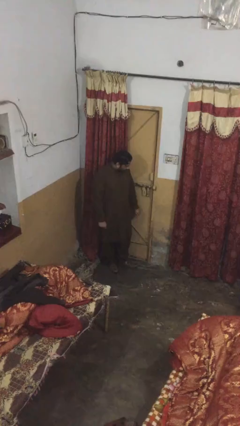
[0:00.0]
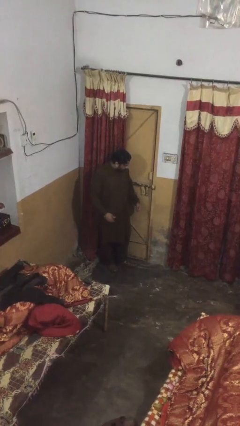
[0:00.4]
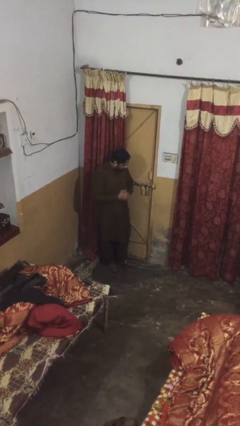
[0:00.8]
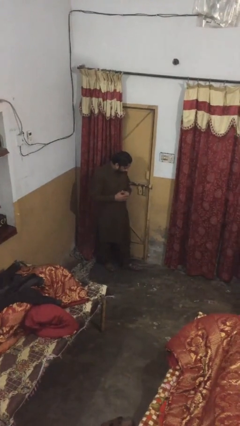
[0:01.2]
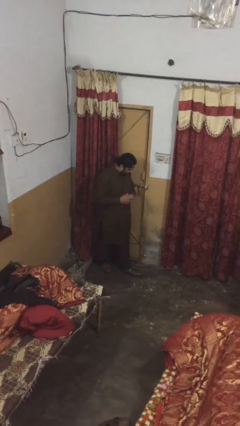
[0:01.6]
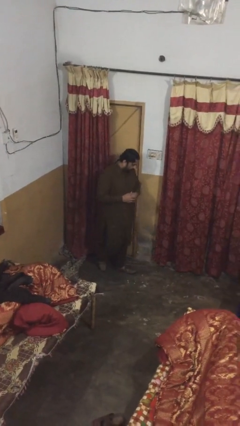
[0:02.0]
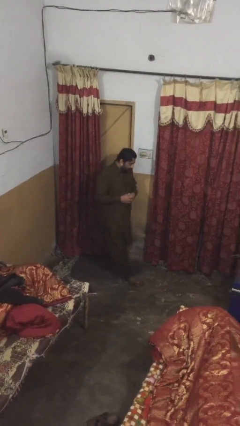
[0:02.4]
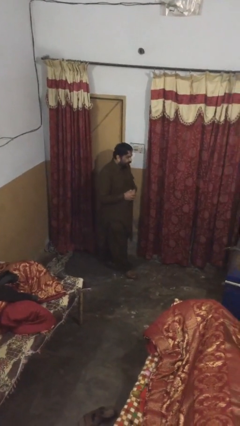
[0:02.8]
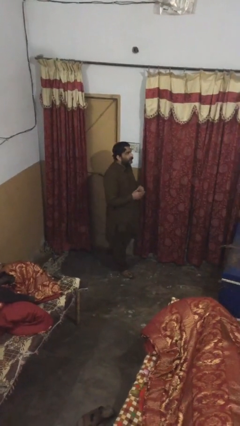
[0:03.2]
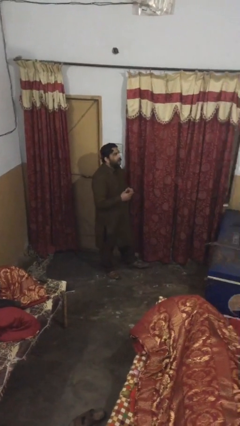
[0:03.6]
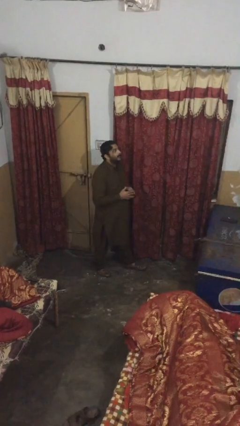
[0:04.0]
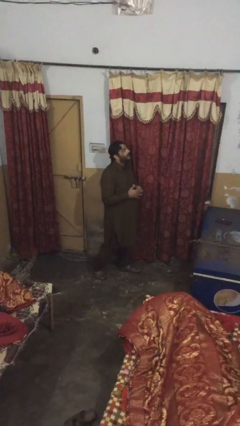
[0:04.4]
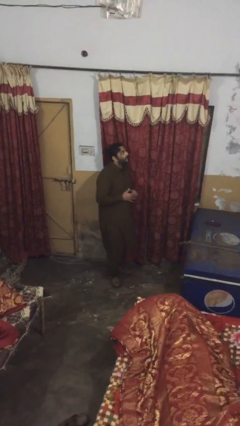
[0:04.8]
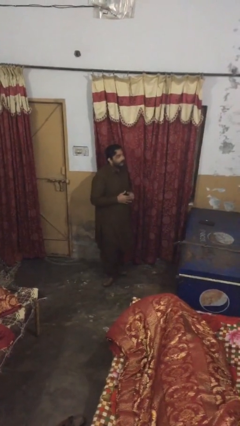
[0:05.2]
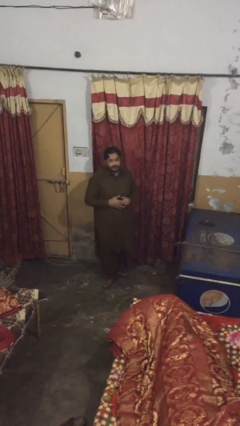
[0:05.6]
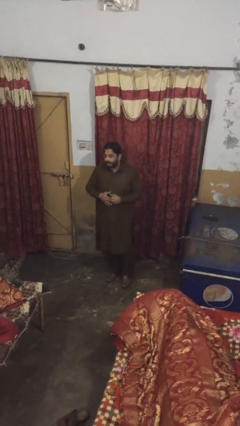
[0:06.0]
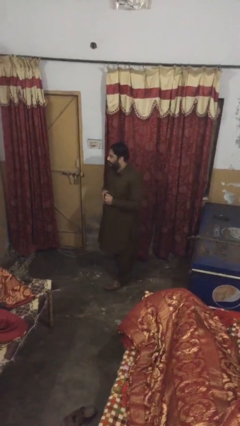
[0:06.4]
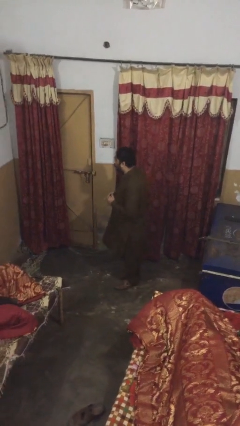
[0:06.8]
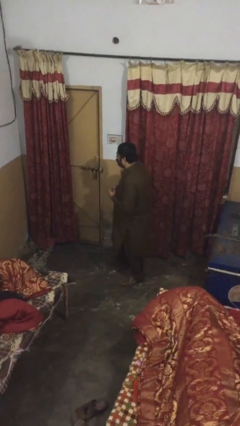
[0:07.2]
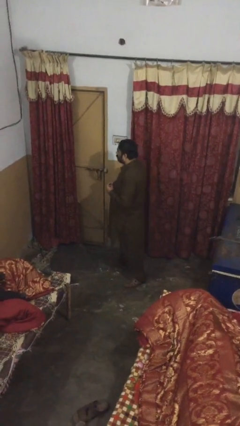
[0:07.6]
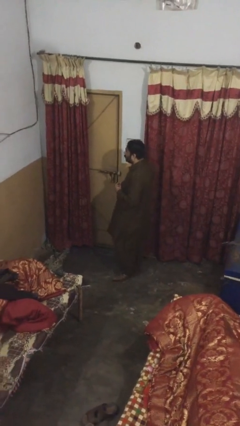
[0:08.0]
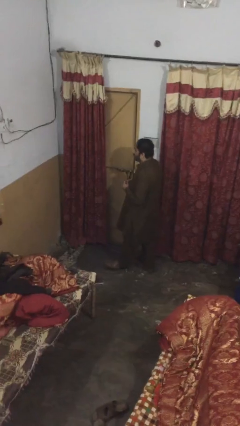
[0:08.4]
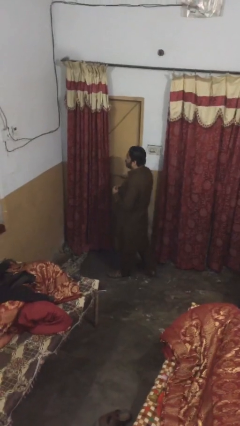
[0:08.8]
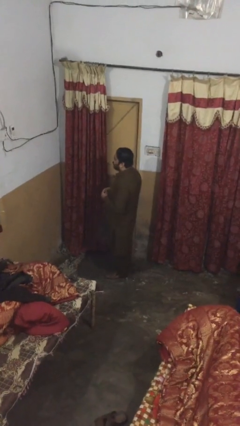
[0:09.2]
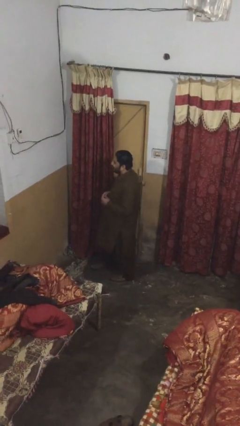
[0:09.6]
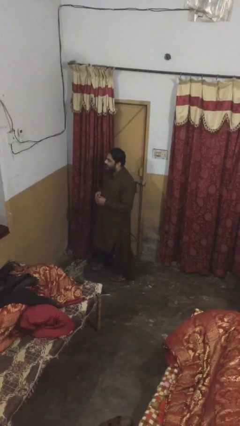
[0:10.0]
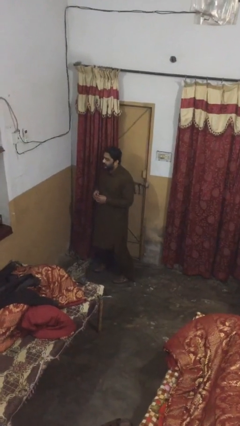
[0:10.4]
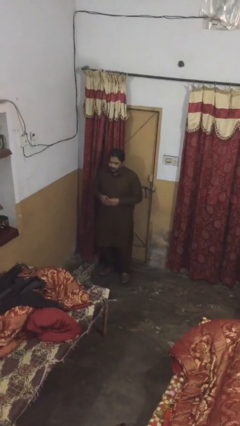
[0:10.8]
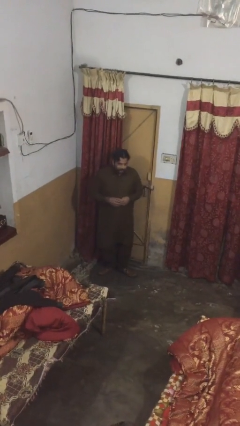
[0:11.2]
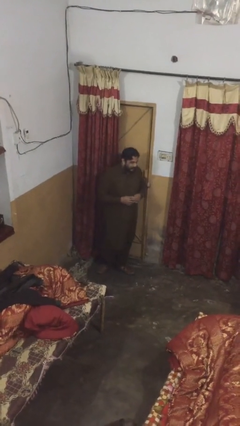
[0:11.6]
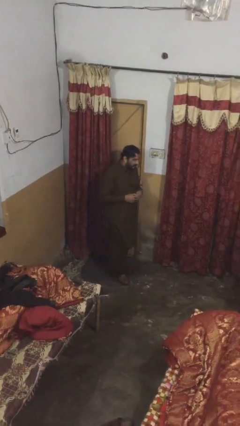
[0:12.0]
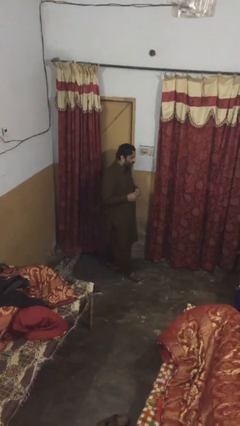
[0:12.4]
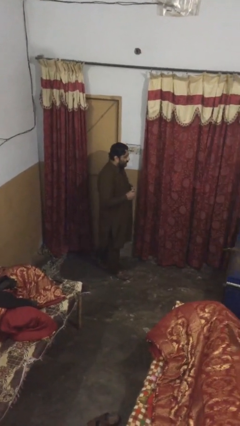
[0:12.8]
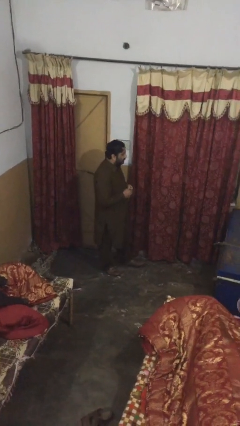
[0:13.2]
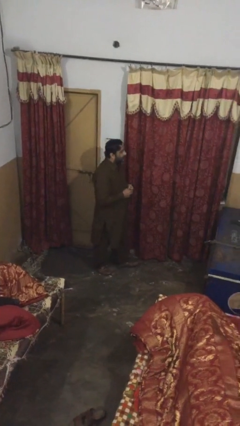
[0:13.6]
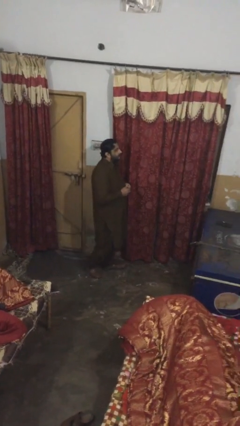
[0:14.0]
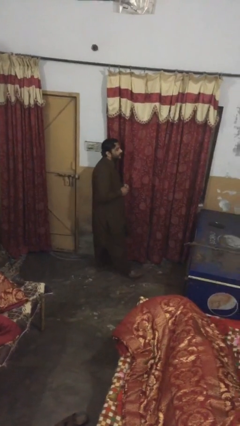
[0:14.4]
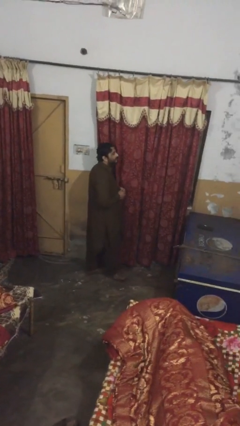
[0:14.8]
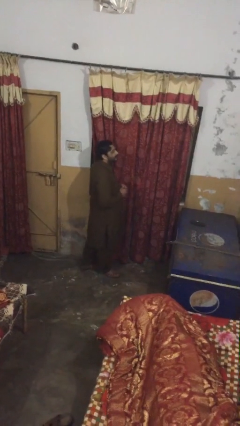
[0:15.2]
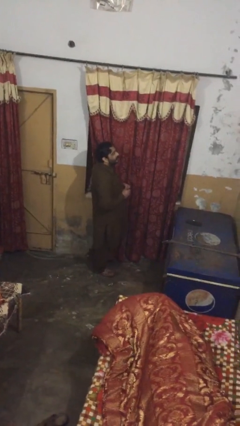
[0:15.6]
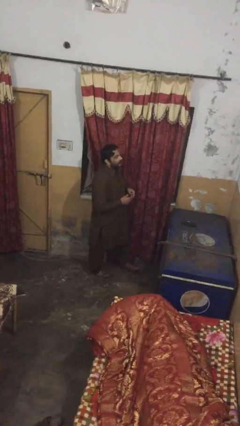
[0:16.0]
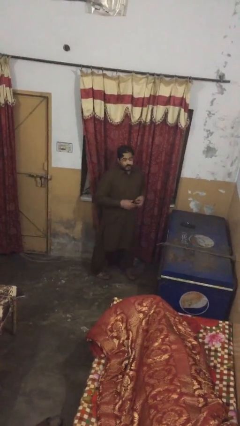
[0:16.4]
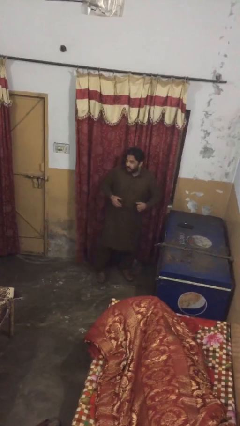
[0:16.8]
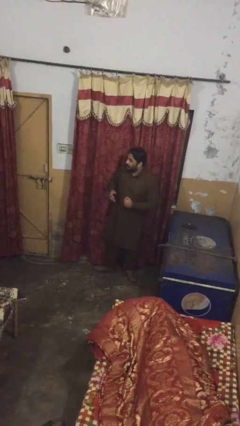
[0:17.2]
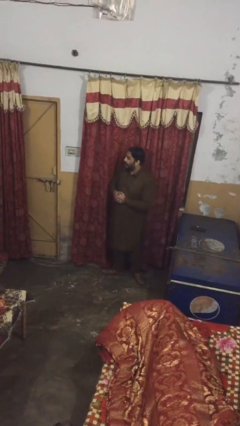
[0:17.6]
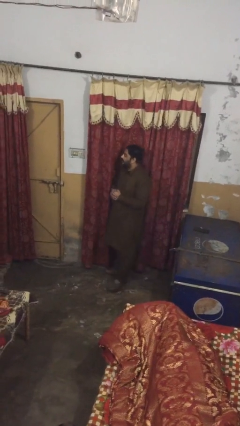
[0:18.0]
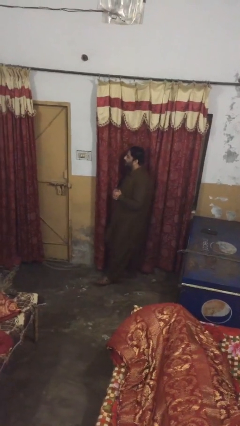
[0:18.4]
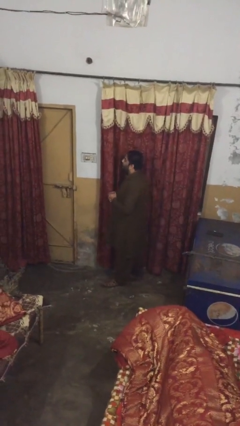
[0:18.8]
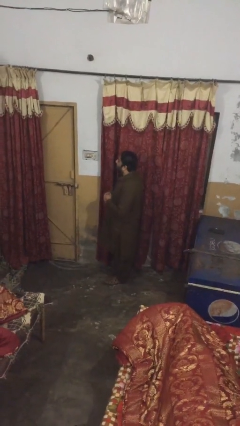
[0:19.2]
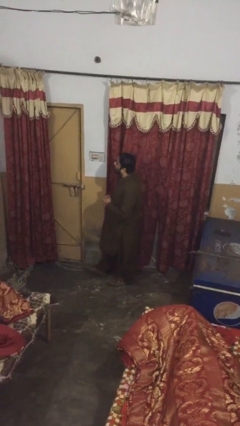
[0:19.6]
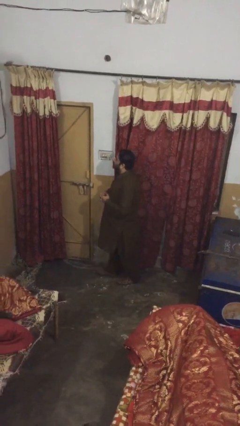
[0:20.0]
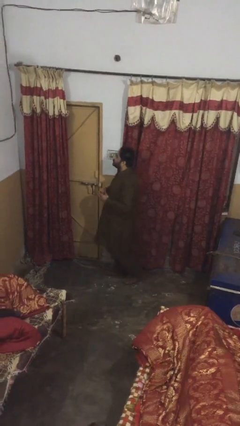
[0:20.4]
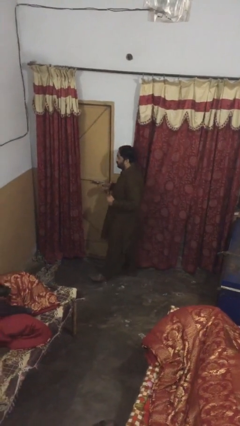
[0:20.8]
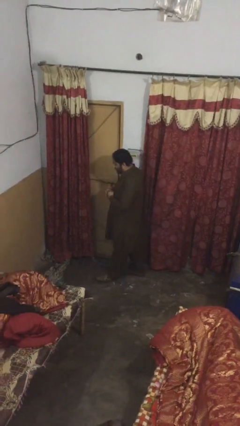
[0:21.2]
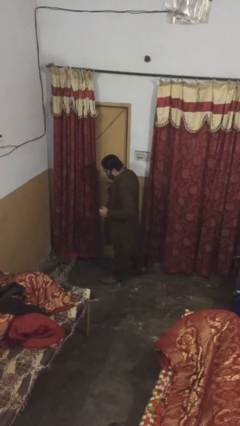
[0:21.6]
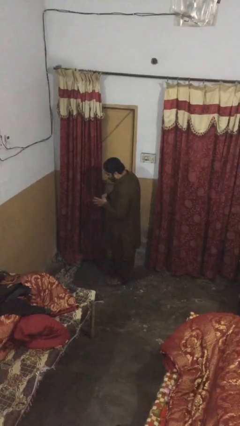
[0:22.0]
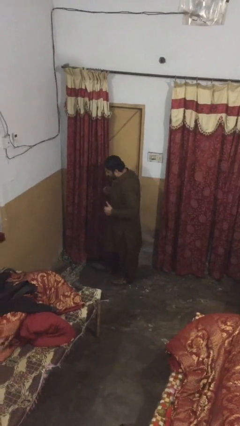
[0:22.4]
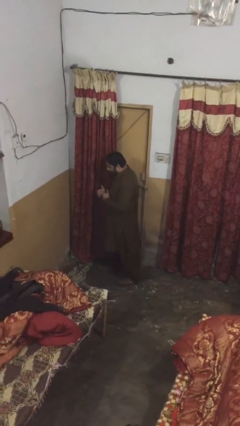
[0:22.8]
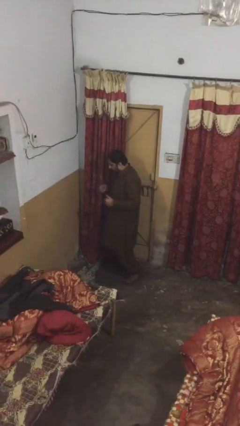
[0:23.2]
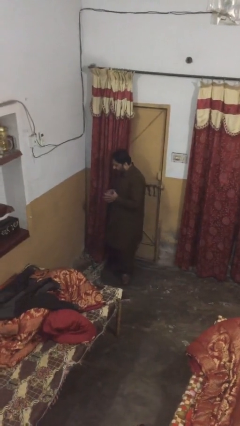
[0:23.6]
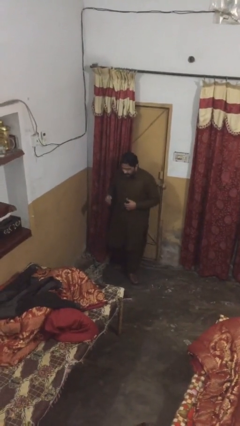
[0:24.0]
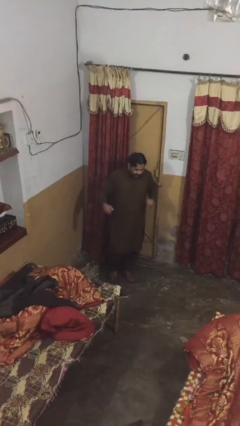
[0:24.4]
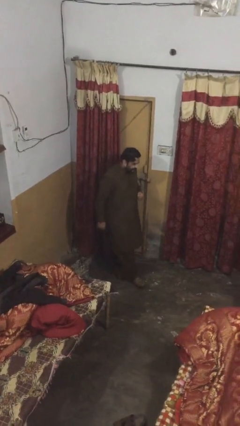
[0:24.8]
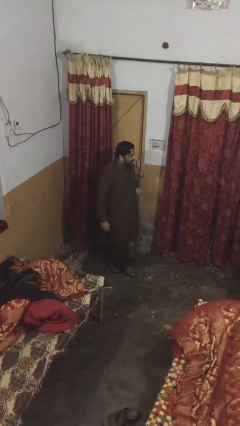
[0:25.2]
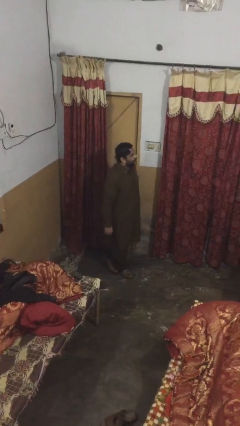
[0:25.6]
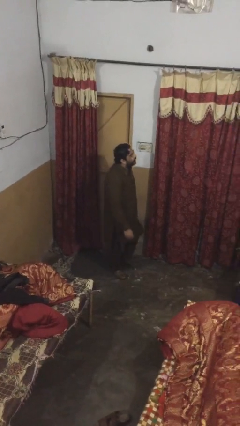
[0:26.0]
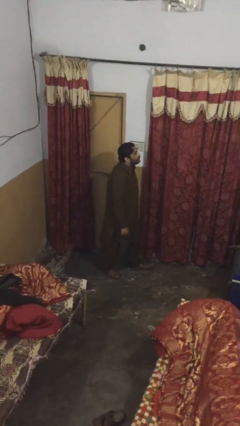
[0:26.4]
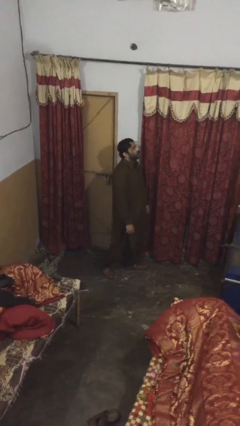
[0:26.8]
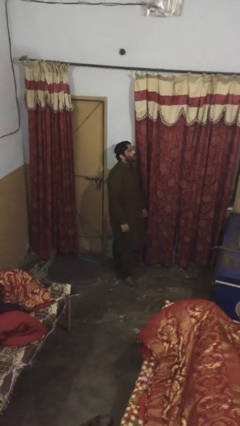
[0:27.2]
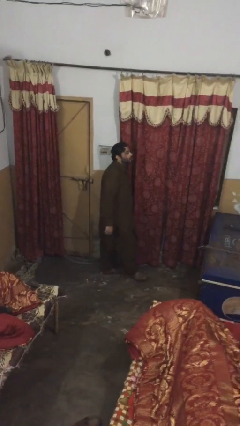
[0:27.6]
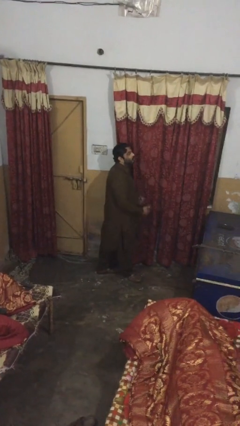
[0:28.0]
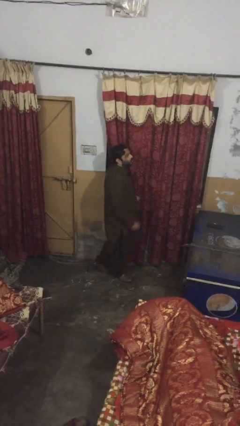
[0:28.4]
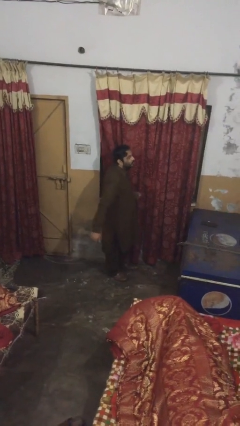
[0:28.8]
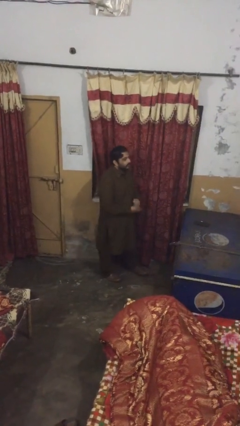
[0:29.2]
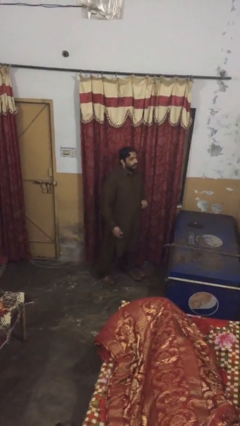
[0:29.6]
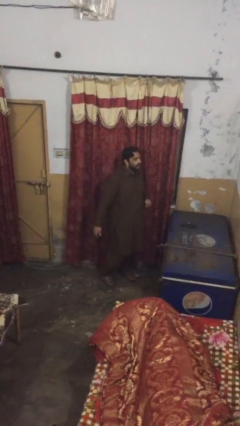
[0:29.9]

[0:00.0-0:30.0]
person walks

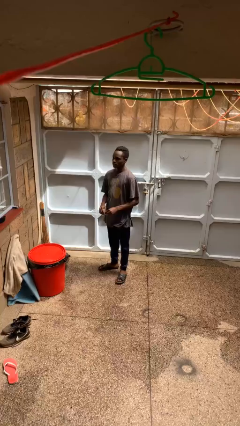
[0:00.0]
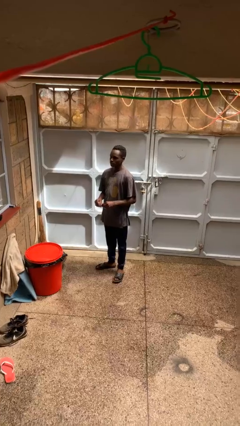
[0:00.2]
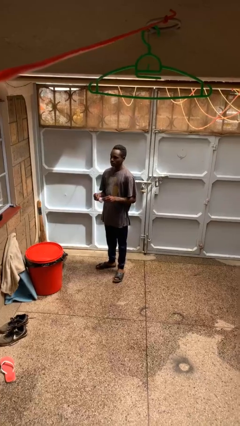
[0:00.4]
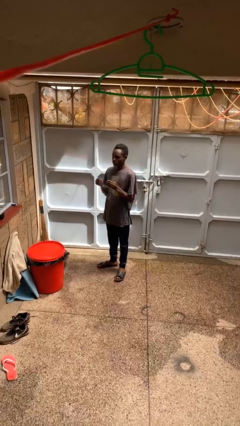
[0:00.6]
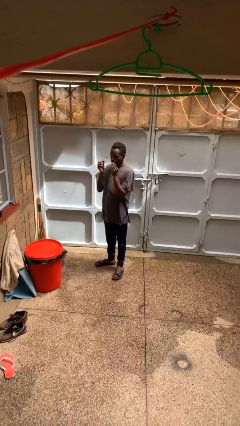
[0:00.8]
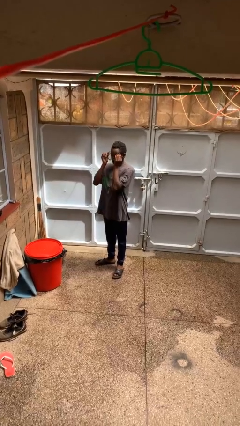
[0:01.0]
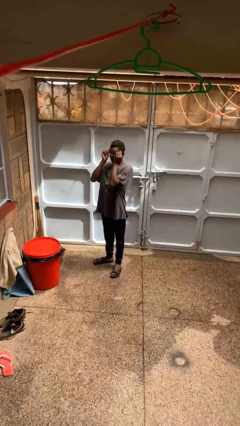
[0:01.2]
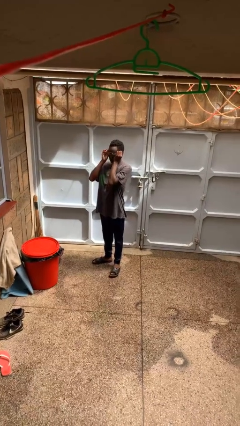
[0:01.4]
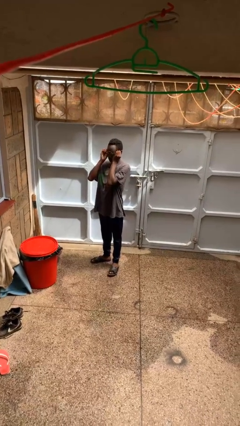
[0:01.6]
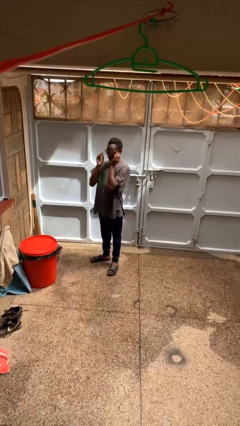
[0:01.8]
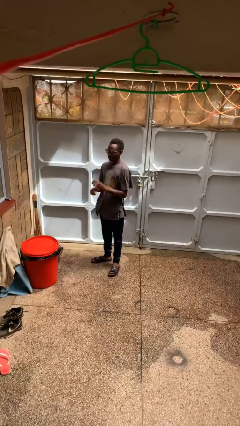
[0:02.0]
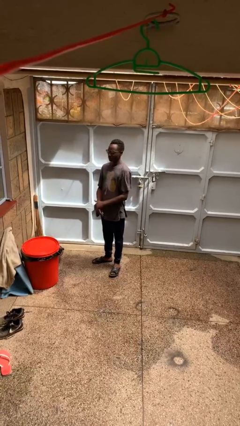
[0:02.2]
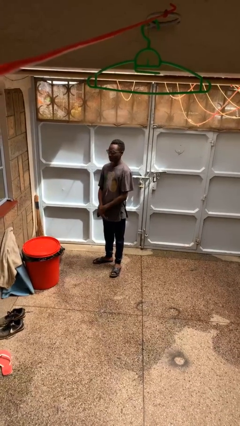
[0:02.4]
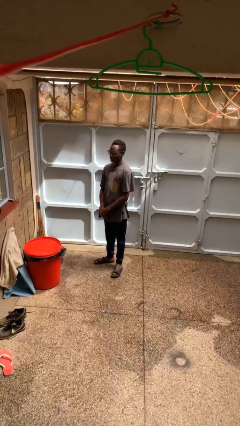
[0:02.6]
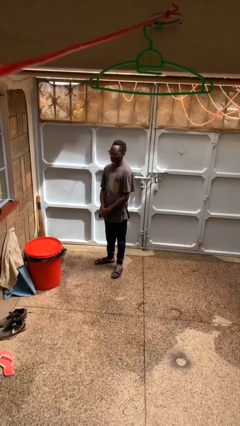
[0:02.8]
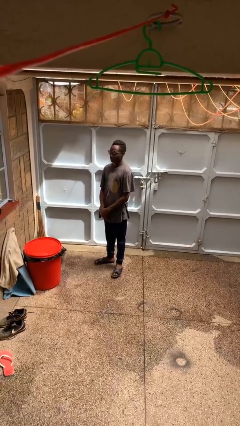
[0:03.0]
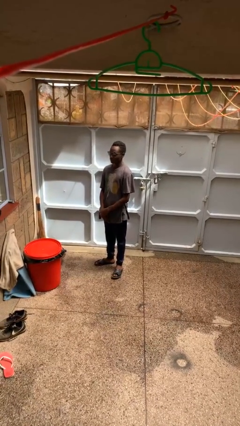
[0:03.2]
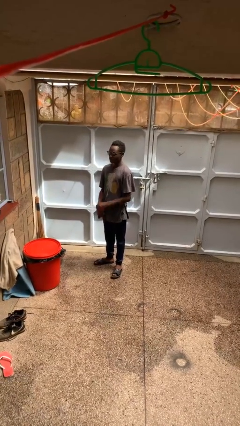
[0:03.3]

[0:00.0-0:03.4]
person puts on glasses
